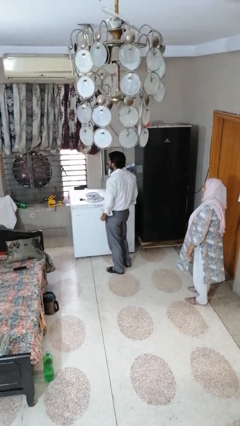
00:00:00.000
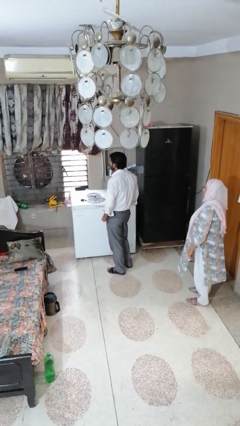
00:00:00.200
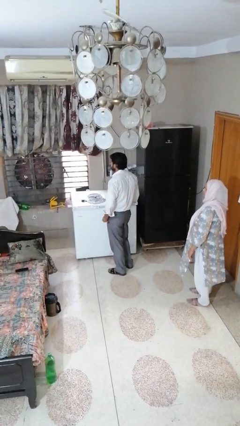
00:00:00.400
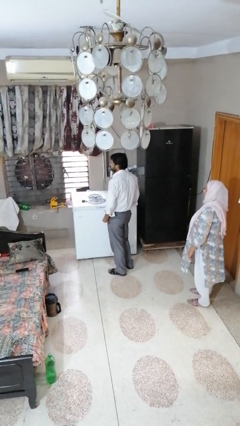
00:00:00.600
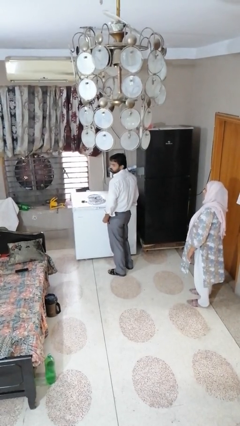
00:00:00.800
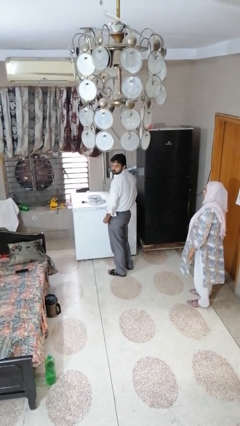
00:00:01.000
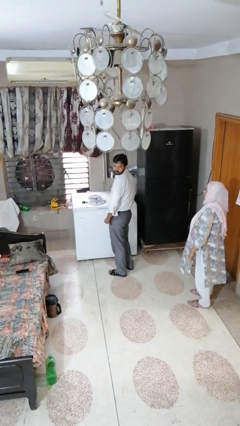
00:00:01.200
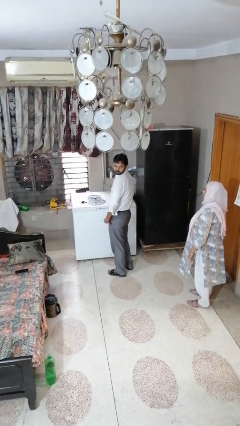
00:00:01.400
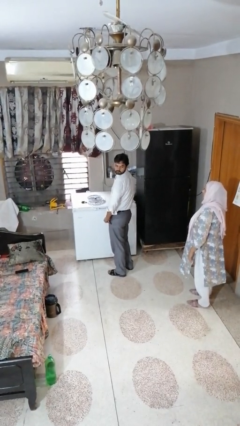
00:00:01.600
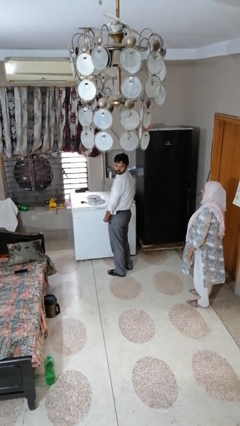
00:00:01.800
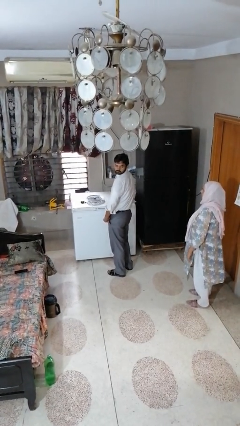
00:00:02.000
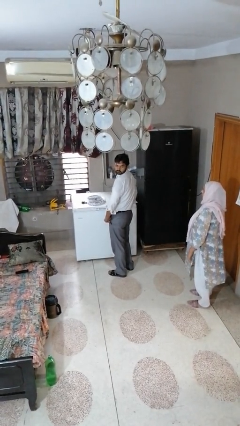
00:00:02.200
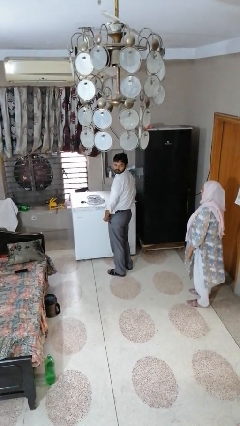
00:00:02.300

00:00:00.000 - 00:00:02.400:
person looks over shoulder

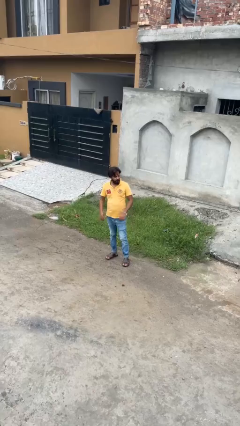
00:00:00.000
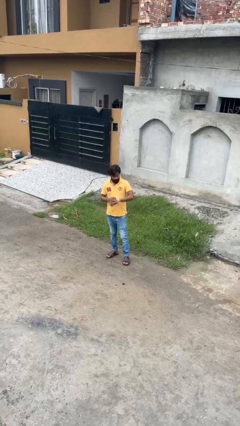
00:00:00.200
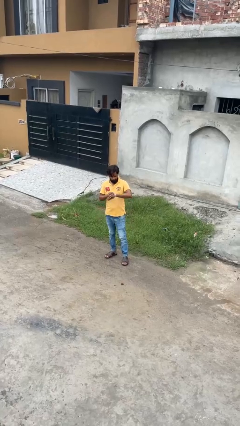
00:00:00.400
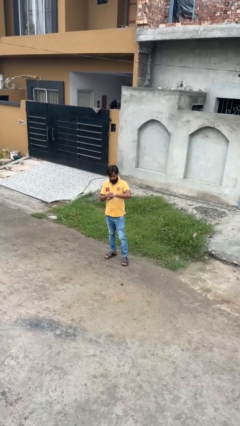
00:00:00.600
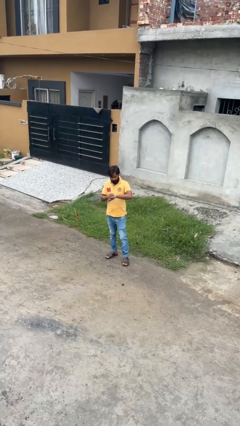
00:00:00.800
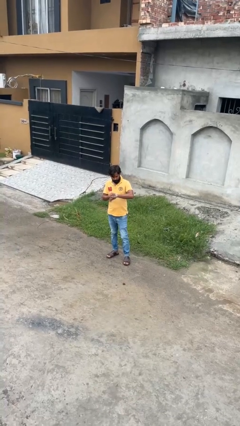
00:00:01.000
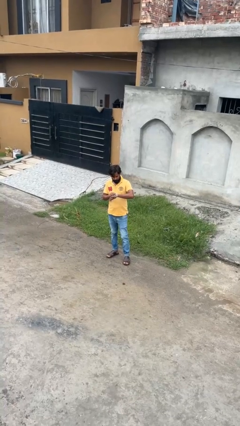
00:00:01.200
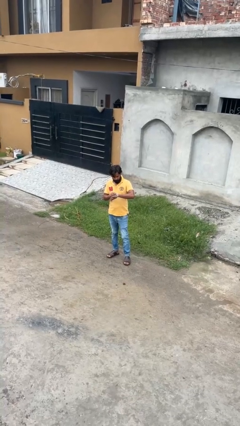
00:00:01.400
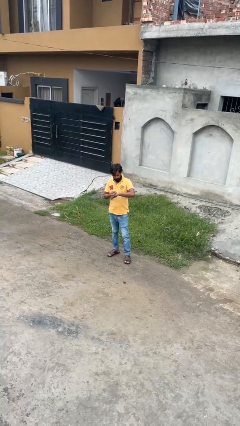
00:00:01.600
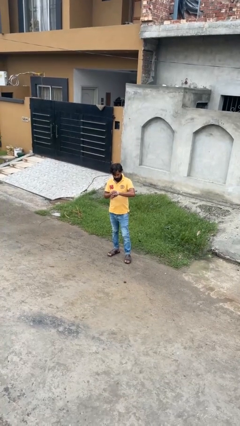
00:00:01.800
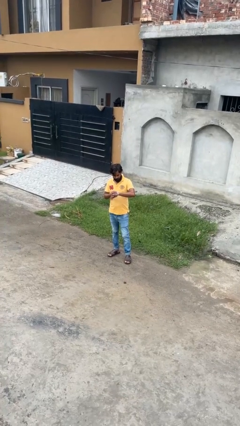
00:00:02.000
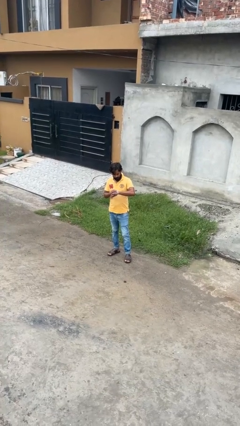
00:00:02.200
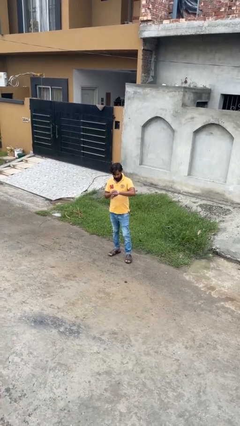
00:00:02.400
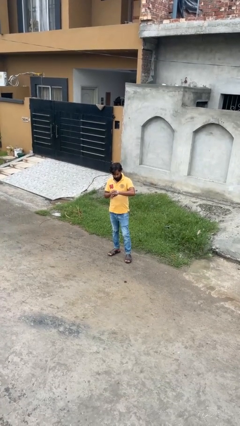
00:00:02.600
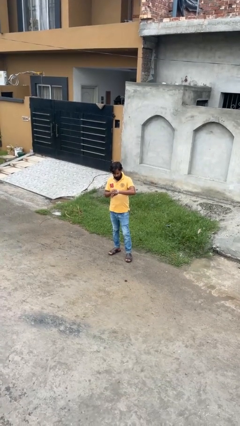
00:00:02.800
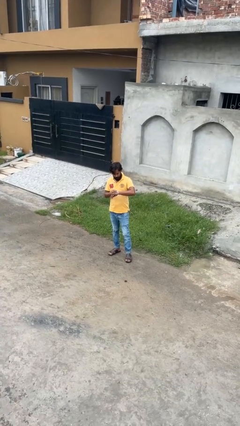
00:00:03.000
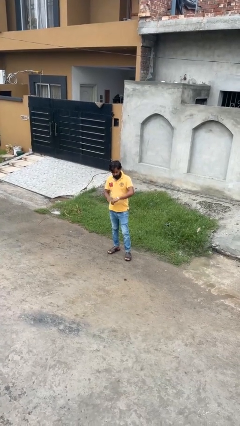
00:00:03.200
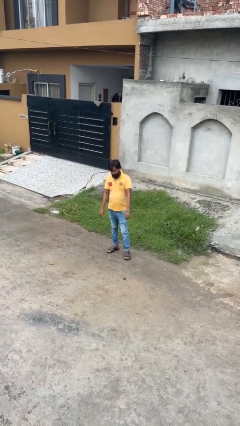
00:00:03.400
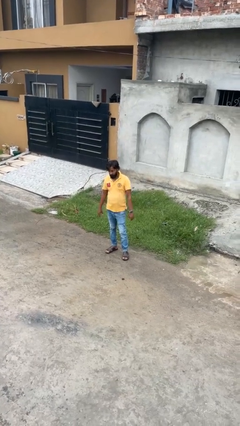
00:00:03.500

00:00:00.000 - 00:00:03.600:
person looks at wristwatch
